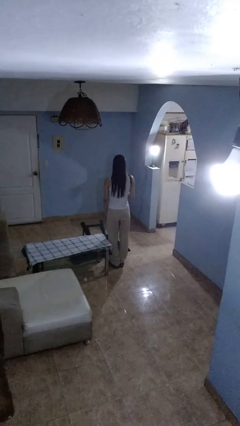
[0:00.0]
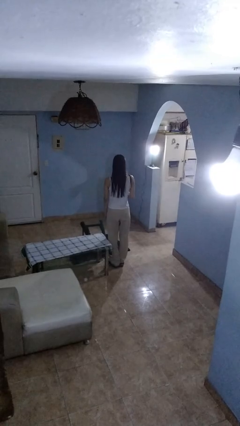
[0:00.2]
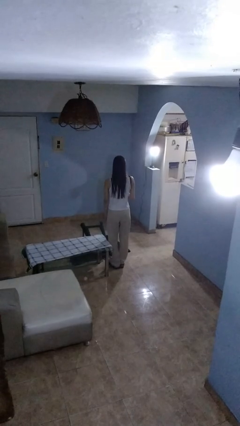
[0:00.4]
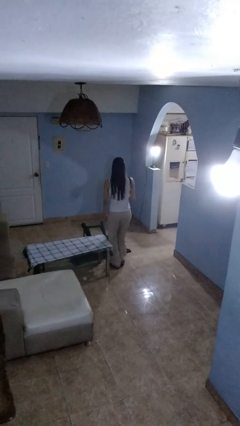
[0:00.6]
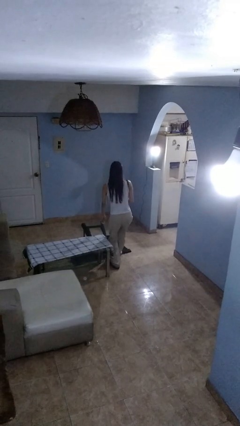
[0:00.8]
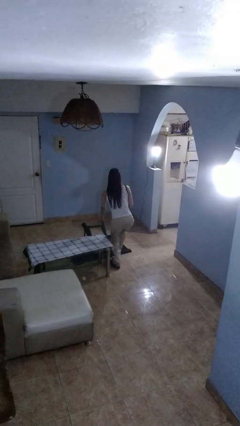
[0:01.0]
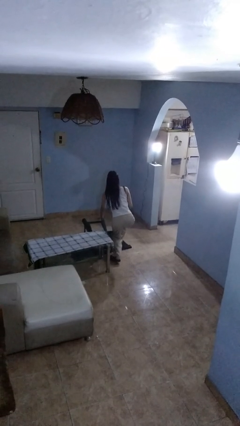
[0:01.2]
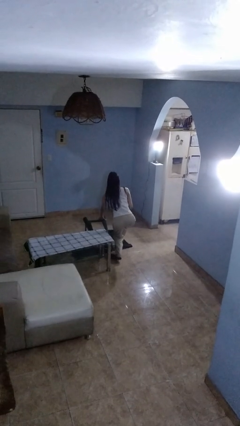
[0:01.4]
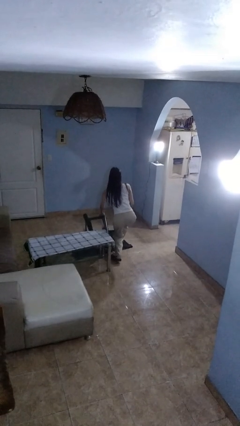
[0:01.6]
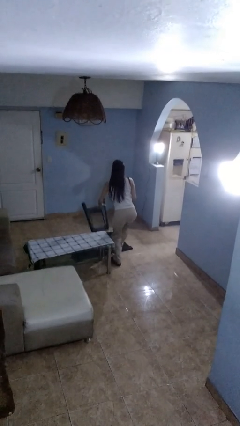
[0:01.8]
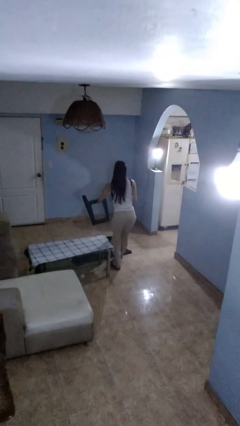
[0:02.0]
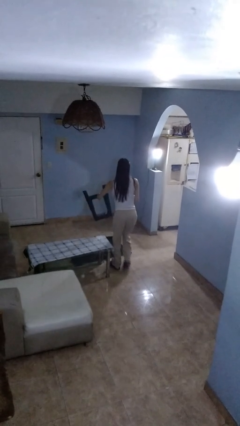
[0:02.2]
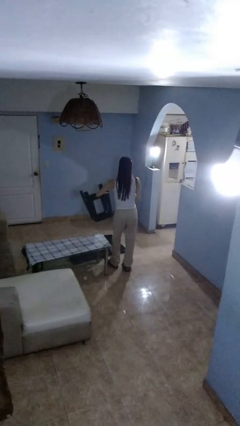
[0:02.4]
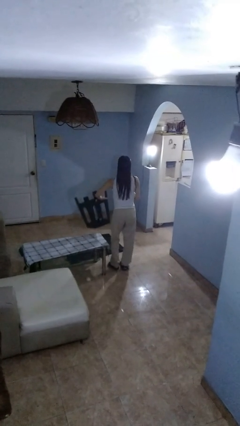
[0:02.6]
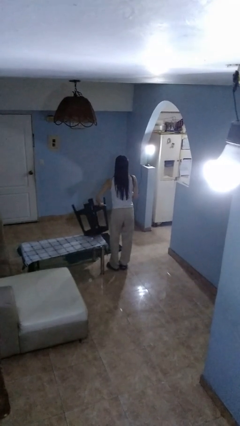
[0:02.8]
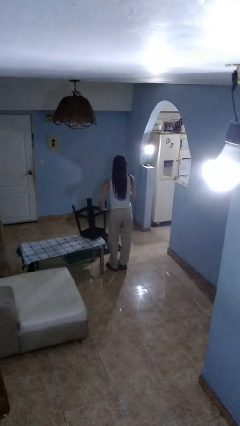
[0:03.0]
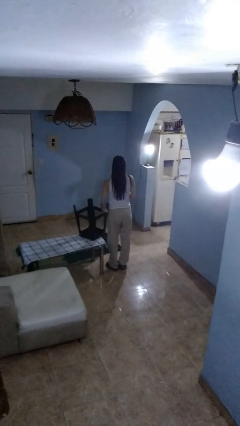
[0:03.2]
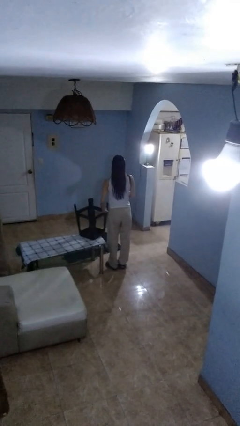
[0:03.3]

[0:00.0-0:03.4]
person sets upright furniture

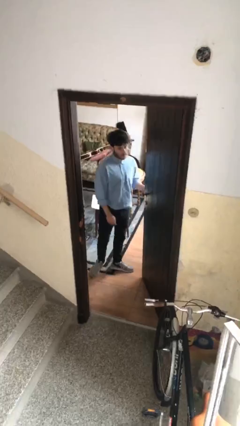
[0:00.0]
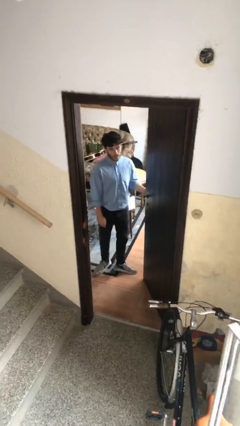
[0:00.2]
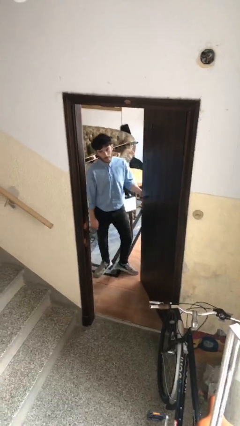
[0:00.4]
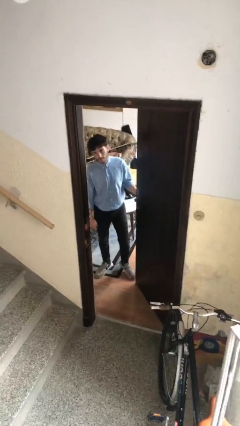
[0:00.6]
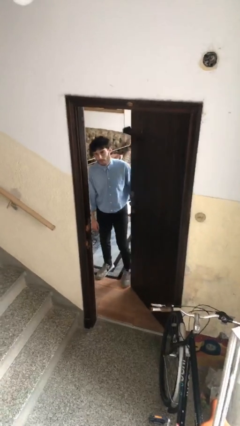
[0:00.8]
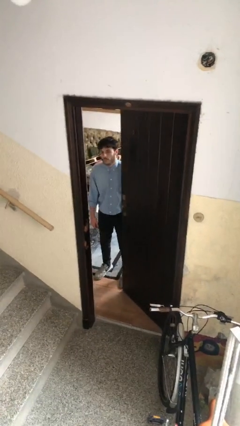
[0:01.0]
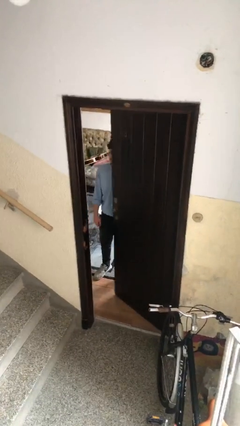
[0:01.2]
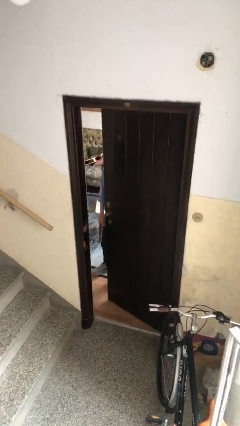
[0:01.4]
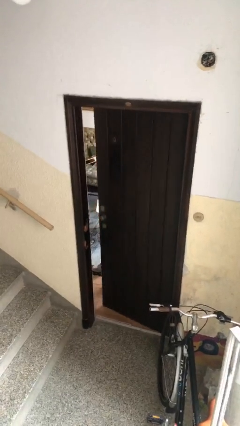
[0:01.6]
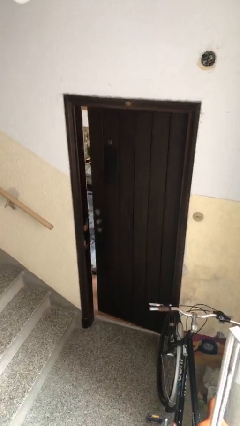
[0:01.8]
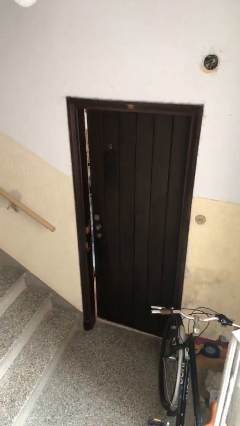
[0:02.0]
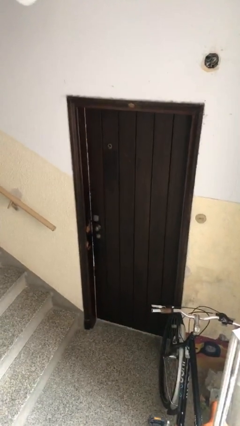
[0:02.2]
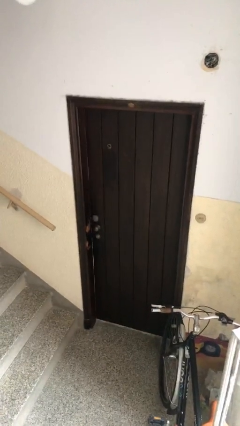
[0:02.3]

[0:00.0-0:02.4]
person closes facility door

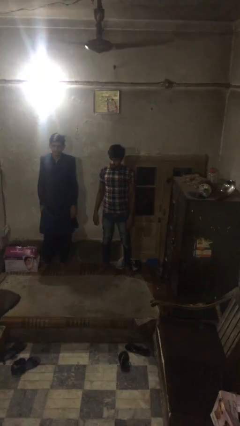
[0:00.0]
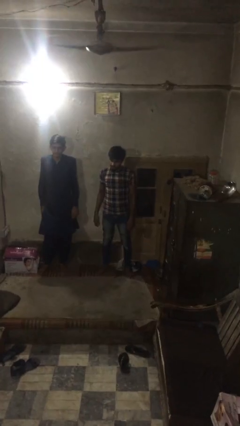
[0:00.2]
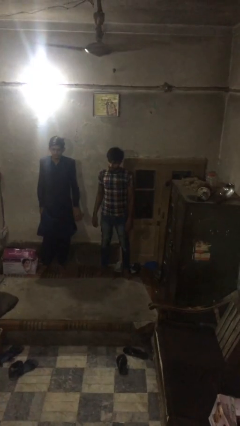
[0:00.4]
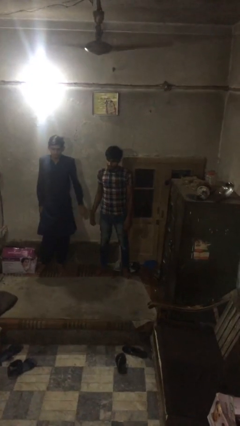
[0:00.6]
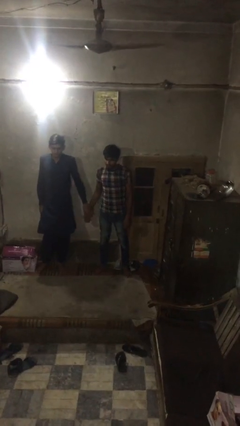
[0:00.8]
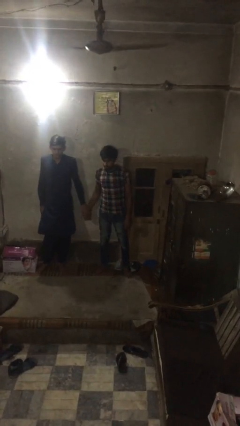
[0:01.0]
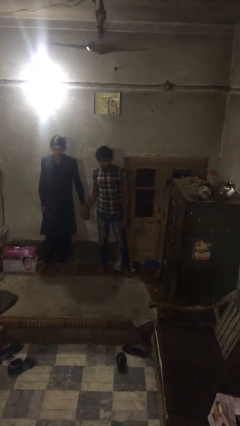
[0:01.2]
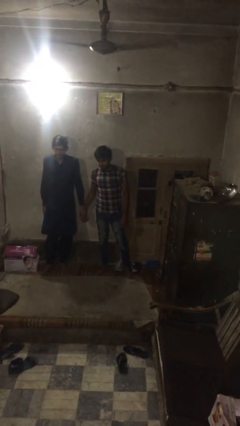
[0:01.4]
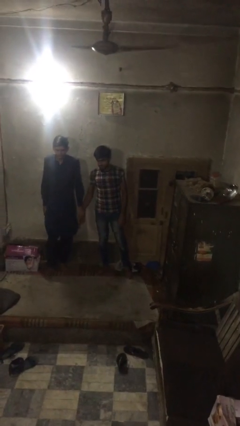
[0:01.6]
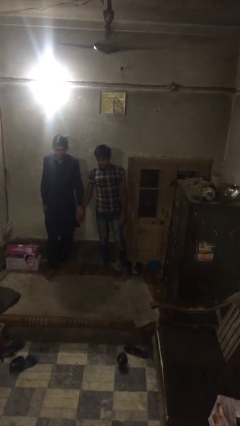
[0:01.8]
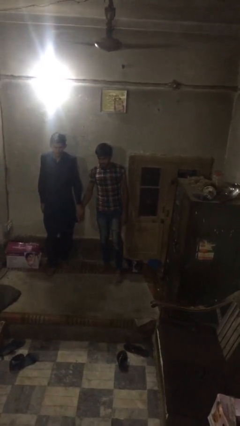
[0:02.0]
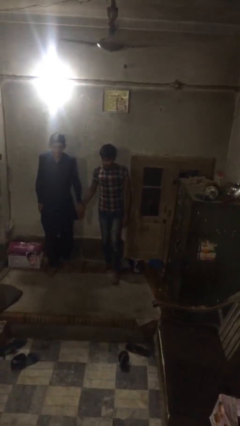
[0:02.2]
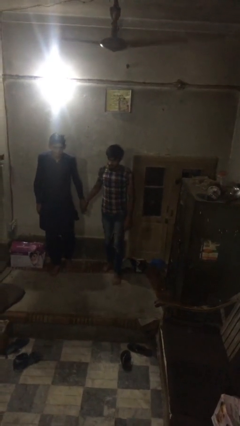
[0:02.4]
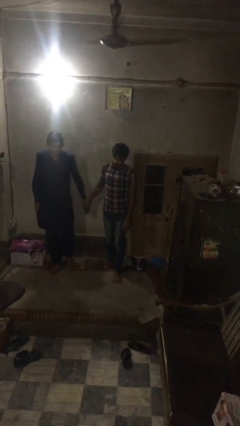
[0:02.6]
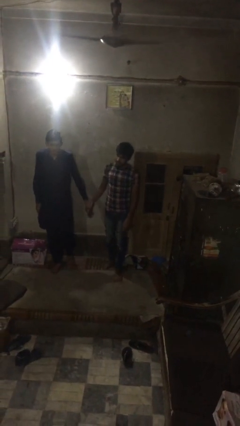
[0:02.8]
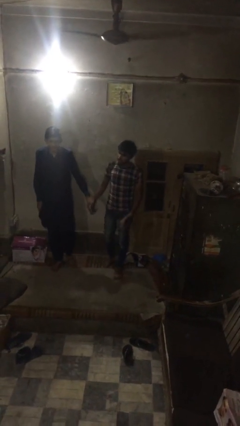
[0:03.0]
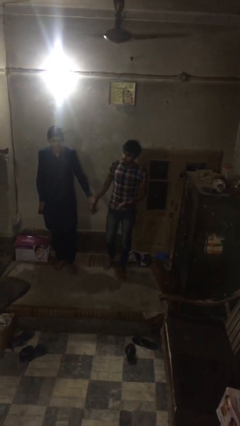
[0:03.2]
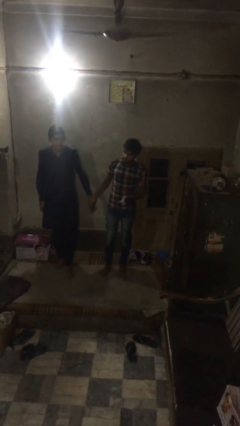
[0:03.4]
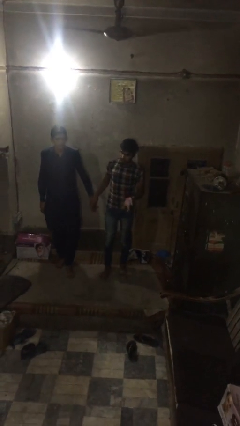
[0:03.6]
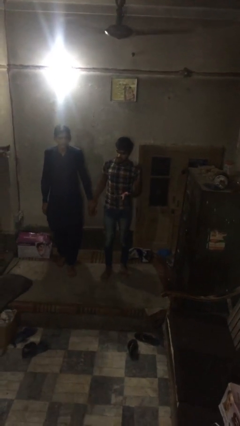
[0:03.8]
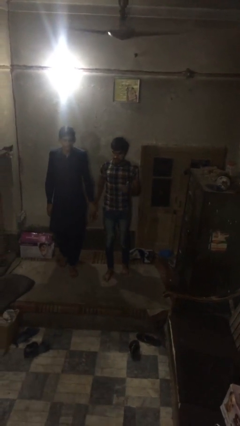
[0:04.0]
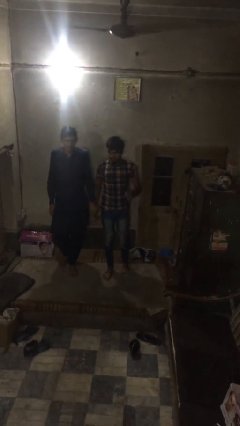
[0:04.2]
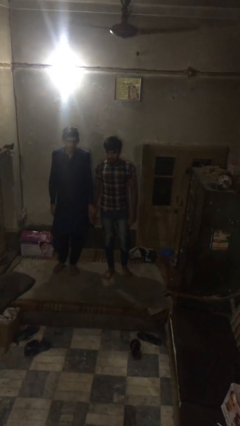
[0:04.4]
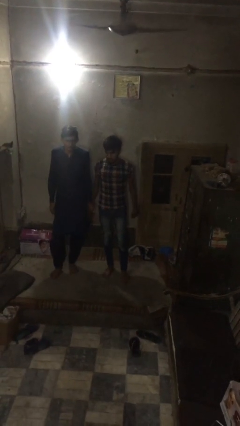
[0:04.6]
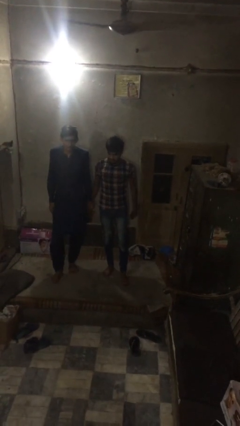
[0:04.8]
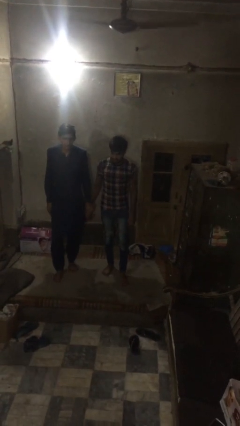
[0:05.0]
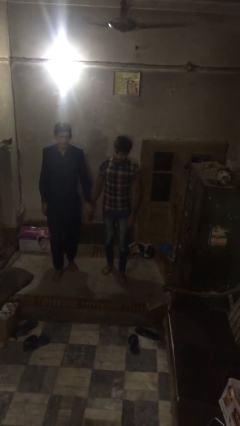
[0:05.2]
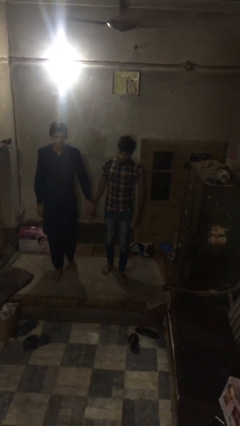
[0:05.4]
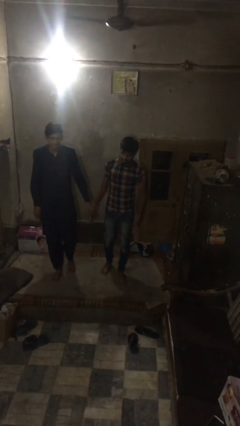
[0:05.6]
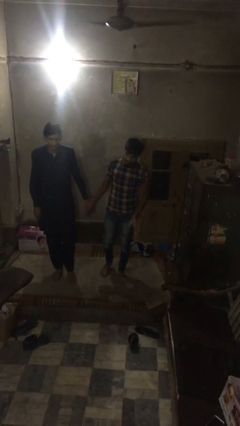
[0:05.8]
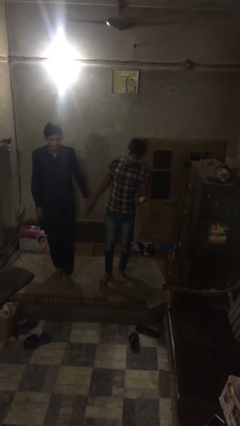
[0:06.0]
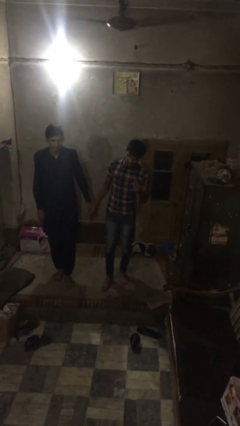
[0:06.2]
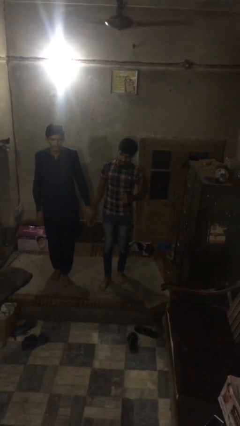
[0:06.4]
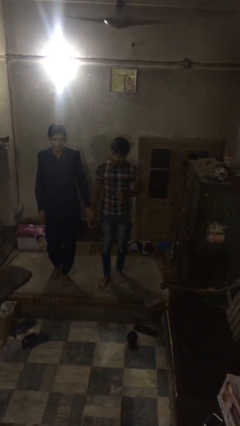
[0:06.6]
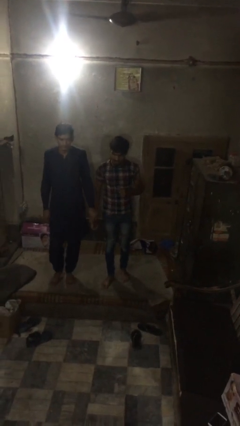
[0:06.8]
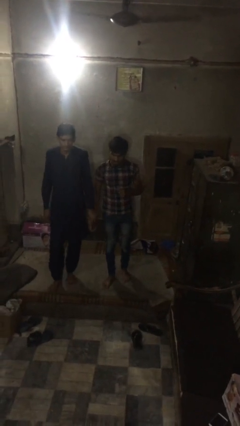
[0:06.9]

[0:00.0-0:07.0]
person holds hand

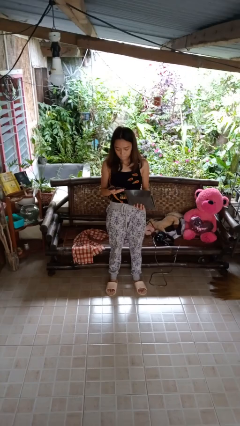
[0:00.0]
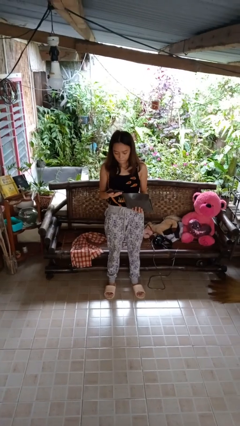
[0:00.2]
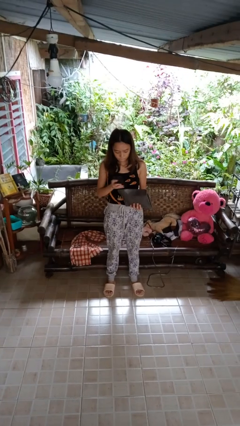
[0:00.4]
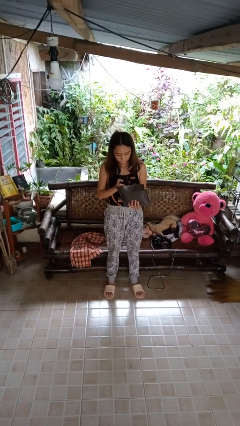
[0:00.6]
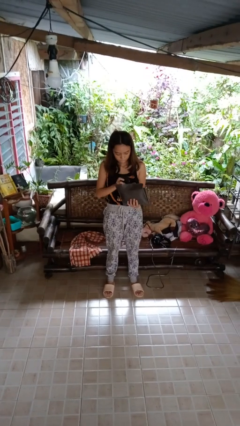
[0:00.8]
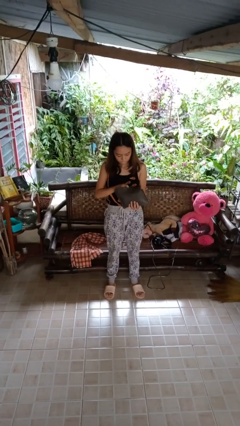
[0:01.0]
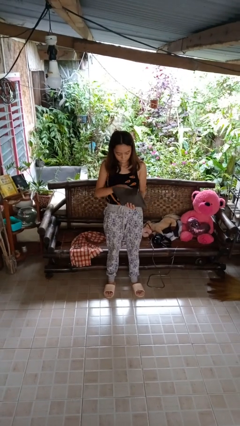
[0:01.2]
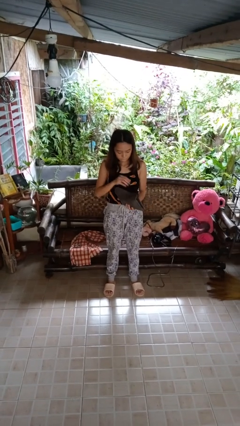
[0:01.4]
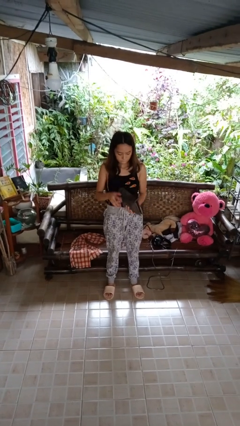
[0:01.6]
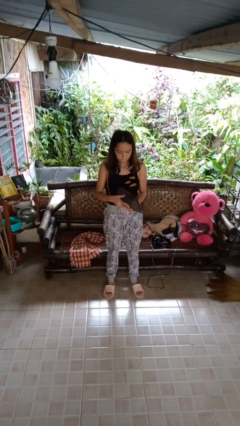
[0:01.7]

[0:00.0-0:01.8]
person puts object into purse

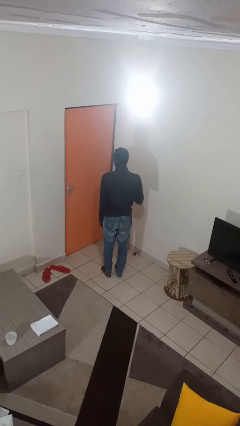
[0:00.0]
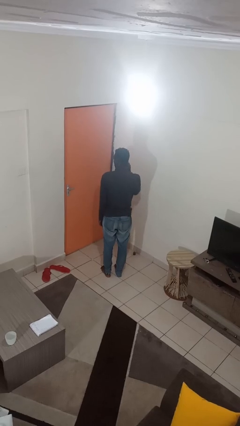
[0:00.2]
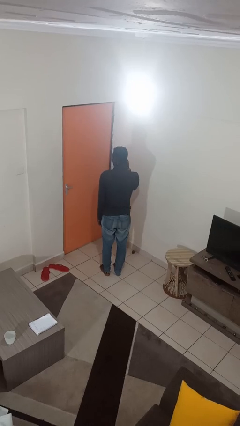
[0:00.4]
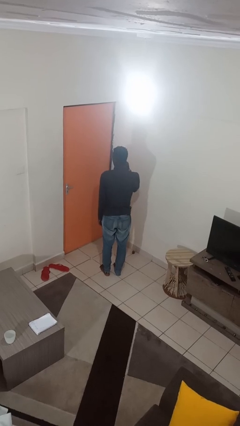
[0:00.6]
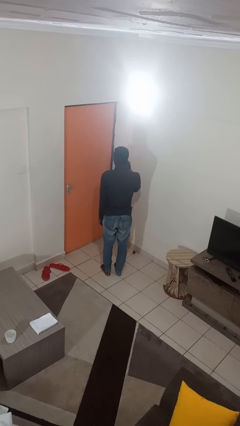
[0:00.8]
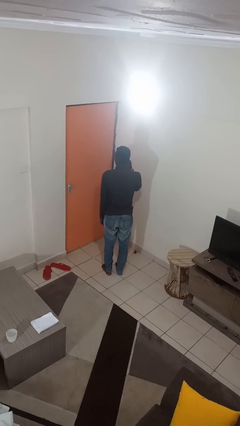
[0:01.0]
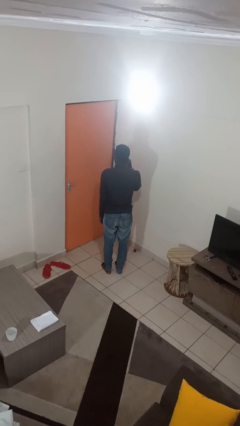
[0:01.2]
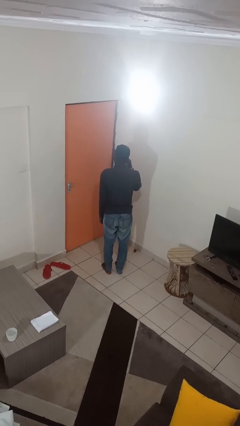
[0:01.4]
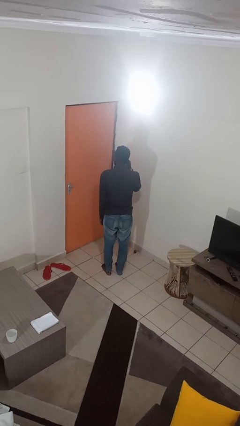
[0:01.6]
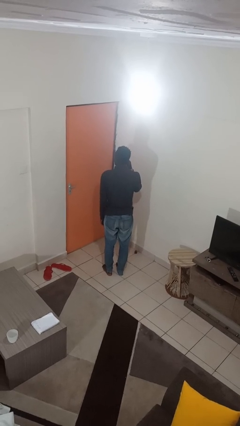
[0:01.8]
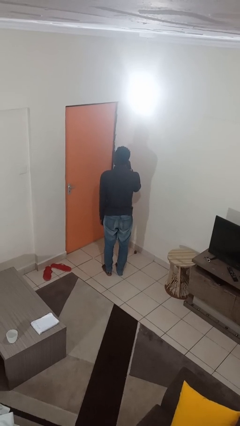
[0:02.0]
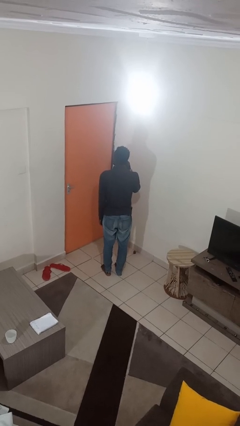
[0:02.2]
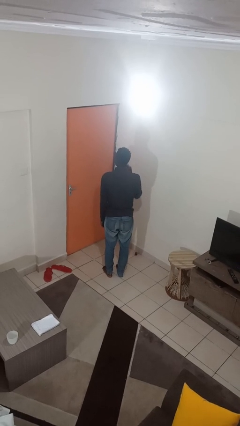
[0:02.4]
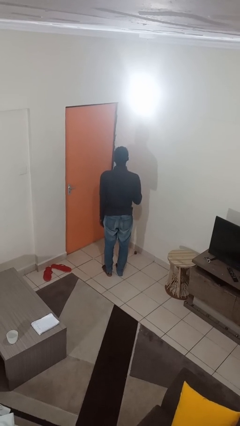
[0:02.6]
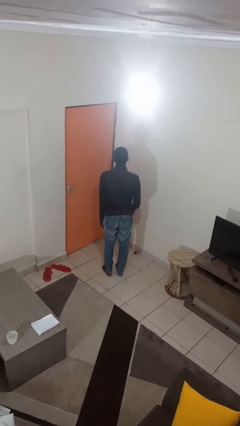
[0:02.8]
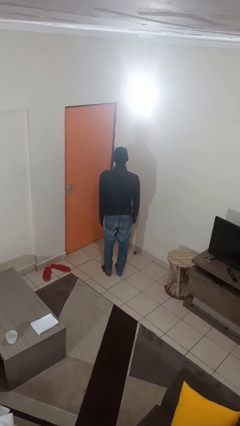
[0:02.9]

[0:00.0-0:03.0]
person touches earlobe
